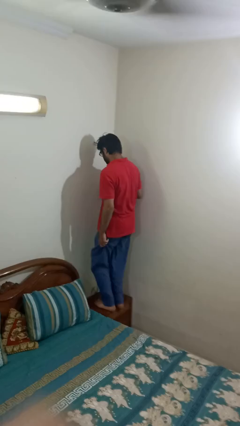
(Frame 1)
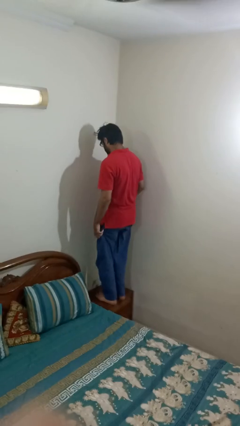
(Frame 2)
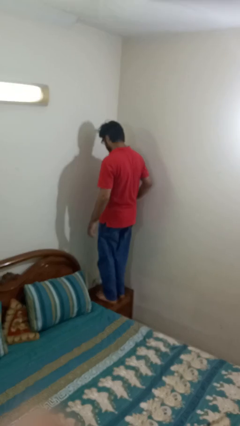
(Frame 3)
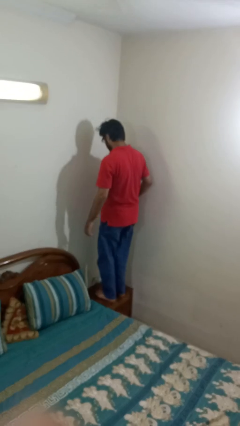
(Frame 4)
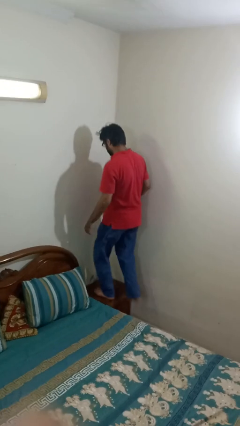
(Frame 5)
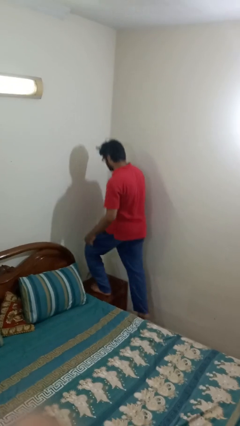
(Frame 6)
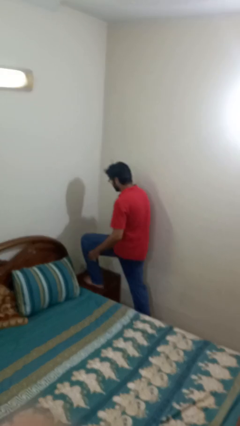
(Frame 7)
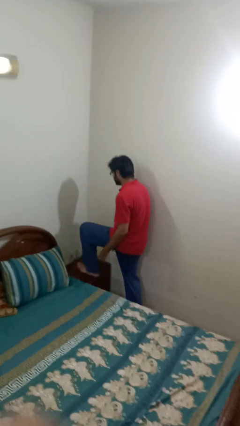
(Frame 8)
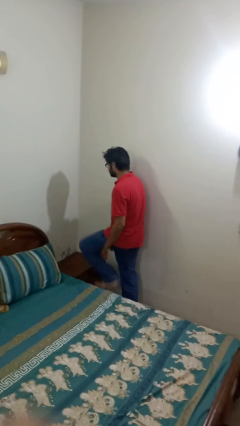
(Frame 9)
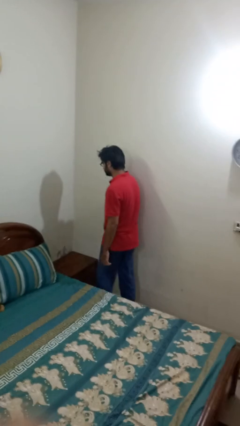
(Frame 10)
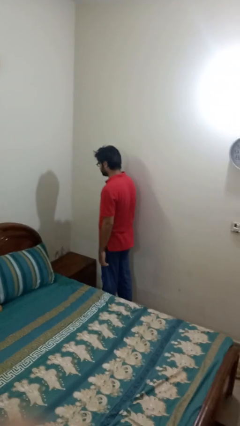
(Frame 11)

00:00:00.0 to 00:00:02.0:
person climbs off table

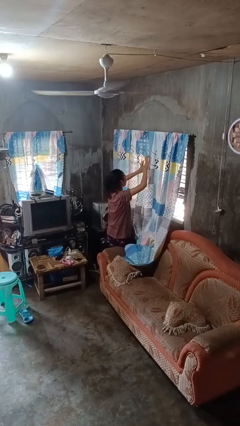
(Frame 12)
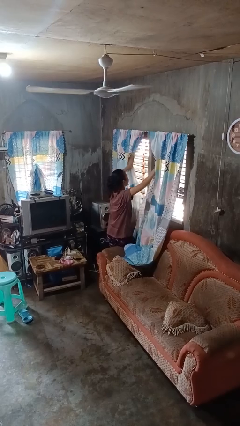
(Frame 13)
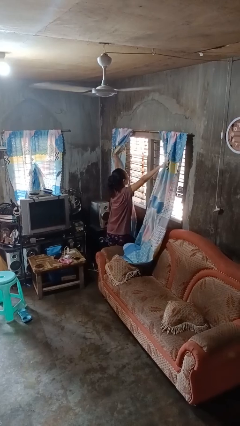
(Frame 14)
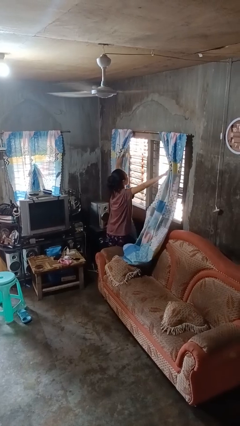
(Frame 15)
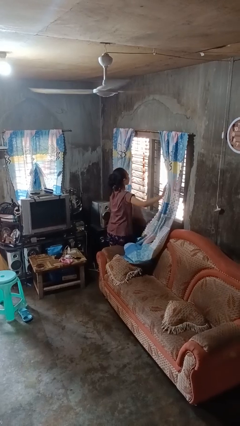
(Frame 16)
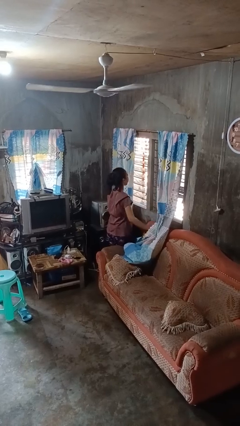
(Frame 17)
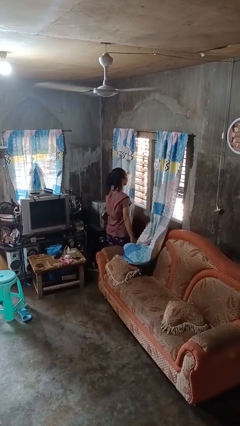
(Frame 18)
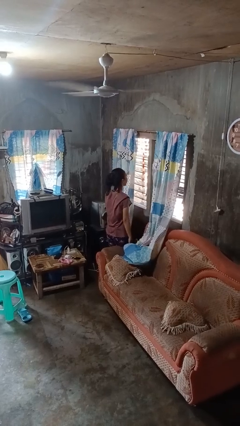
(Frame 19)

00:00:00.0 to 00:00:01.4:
person opens curtains

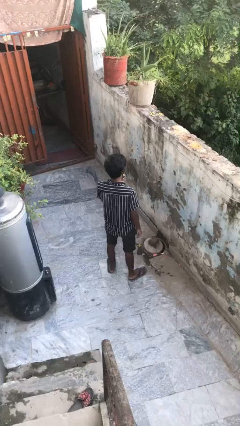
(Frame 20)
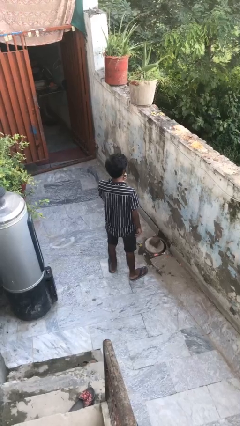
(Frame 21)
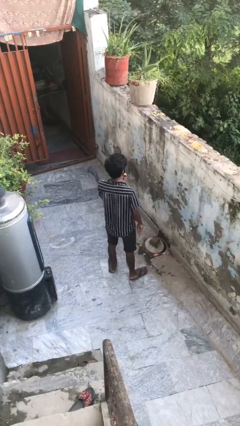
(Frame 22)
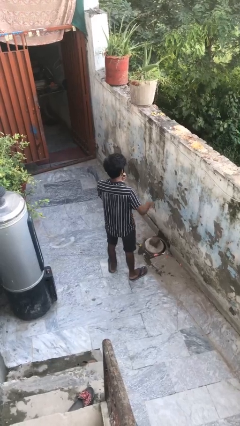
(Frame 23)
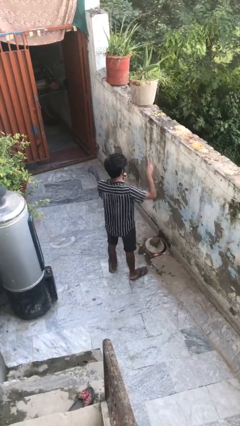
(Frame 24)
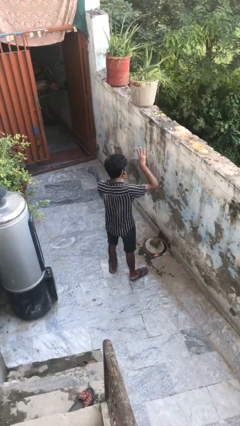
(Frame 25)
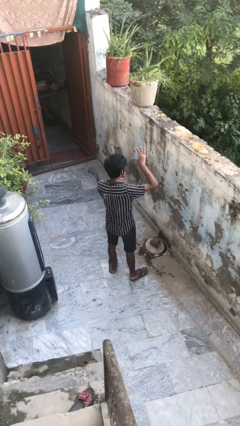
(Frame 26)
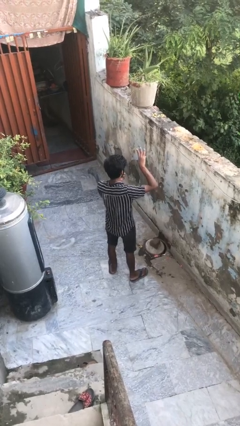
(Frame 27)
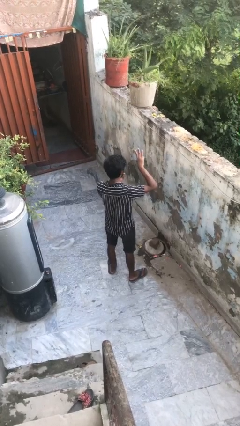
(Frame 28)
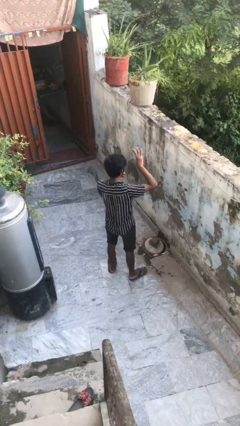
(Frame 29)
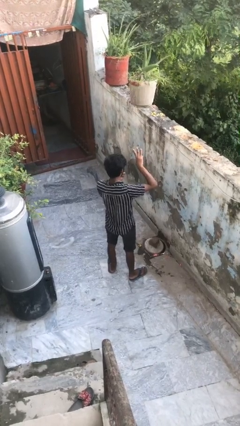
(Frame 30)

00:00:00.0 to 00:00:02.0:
person gestures number three

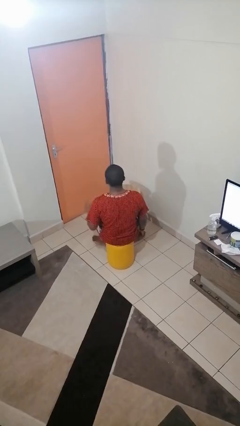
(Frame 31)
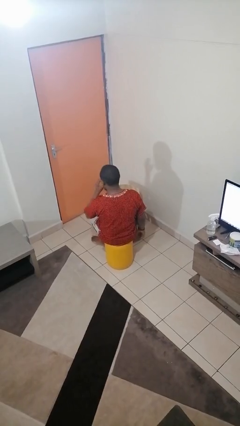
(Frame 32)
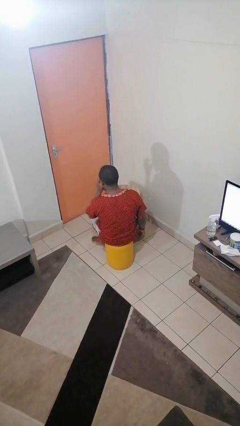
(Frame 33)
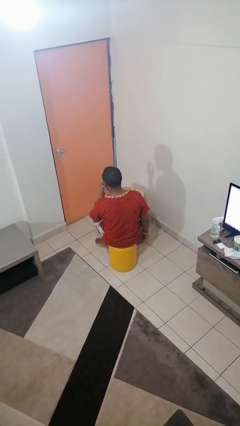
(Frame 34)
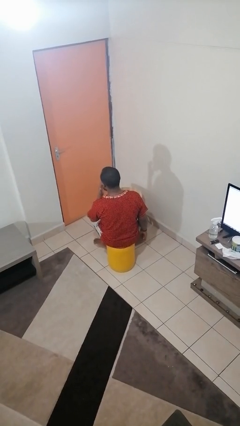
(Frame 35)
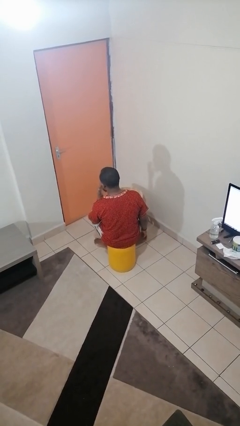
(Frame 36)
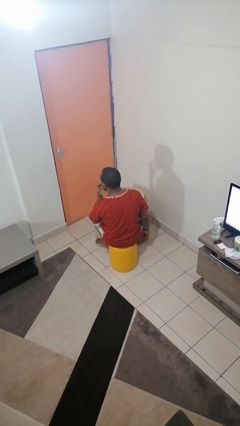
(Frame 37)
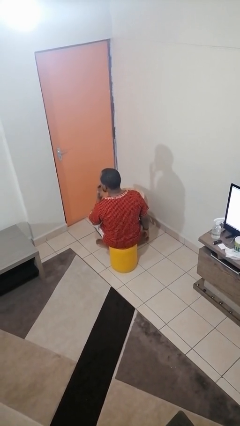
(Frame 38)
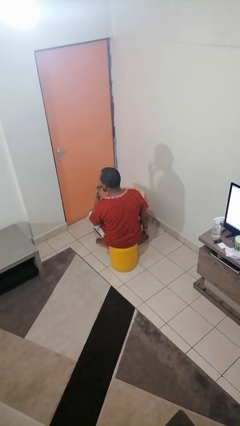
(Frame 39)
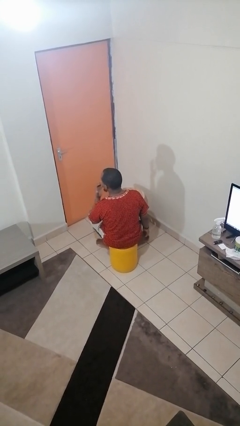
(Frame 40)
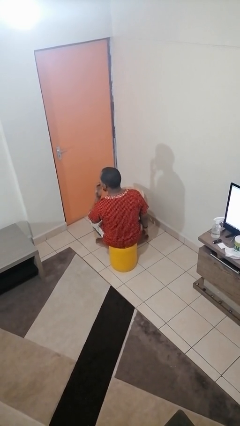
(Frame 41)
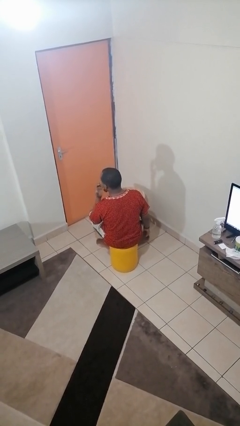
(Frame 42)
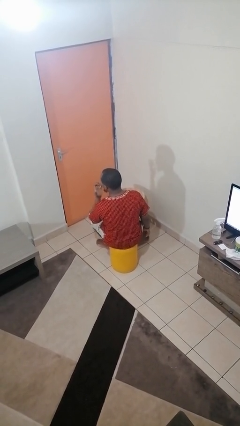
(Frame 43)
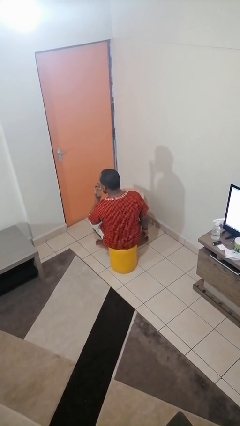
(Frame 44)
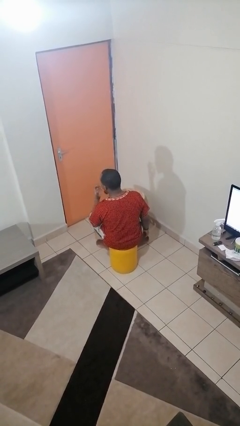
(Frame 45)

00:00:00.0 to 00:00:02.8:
person licks fingers

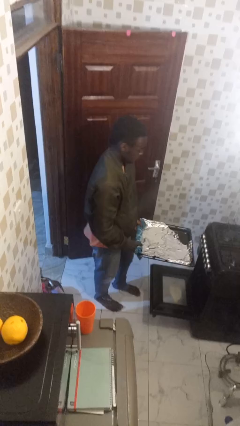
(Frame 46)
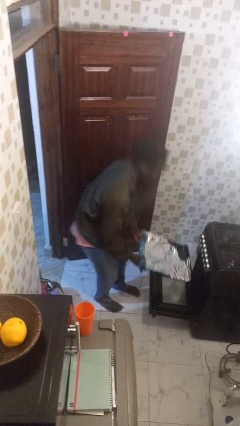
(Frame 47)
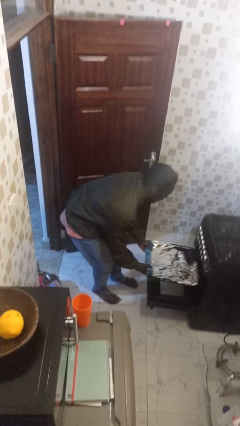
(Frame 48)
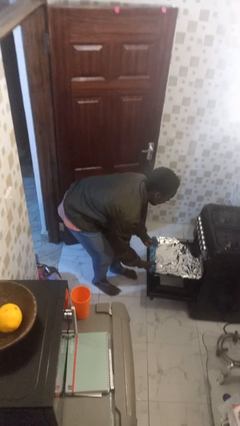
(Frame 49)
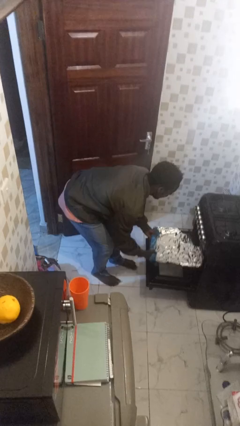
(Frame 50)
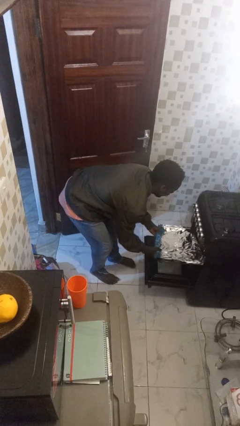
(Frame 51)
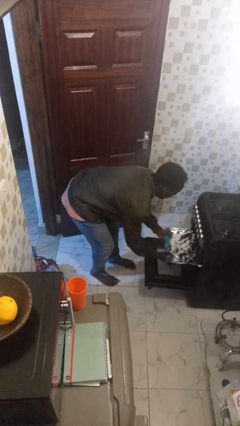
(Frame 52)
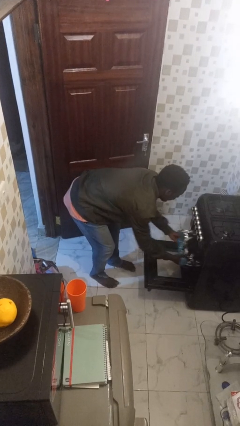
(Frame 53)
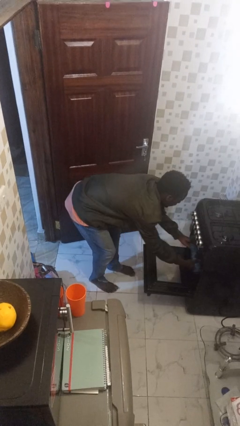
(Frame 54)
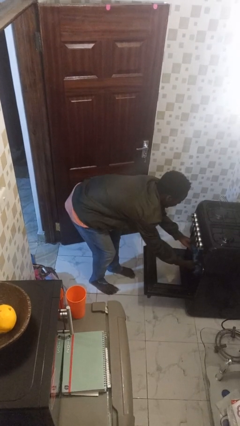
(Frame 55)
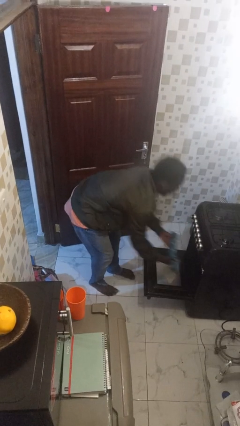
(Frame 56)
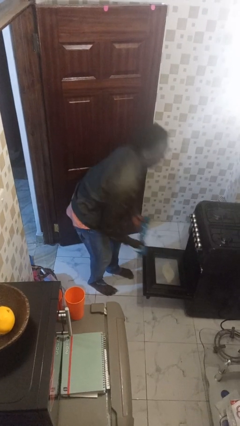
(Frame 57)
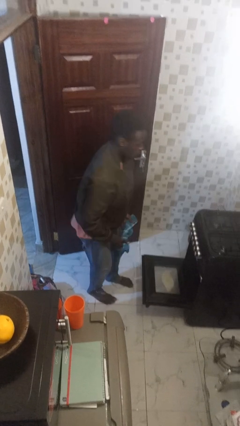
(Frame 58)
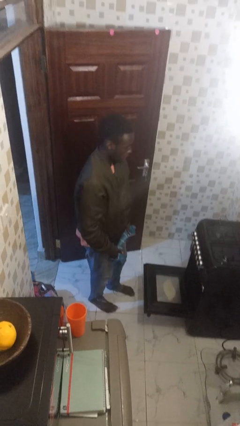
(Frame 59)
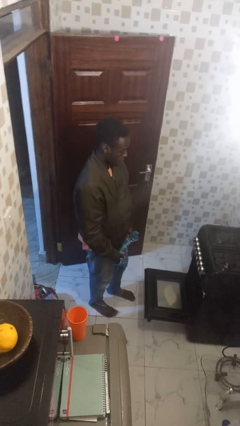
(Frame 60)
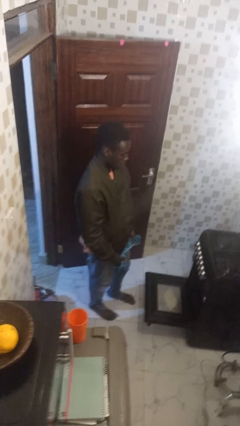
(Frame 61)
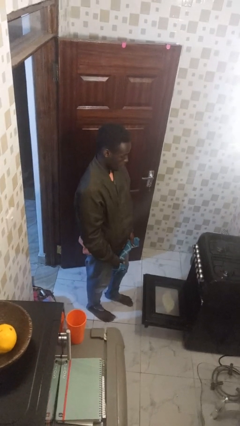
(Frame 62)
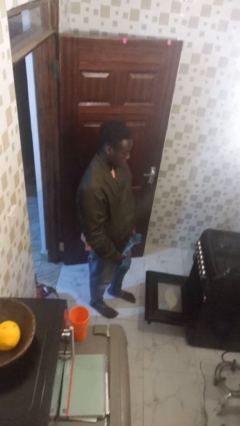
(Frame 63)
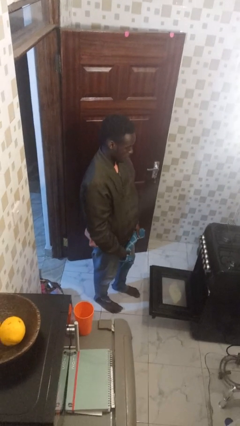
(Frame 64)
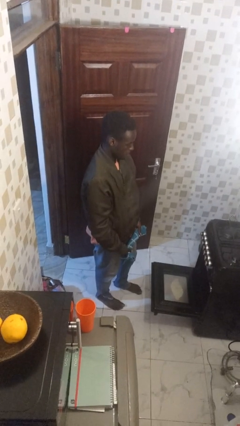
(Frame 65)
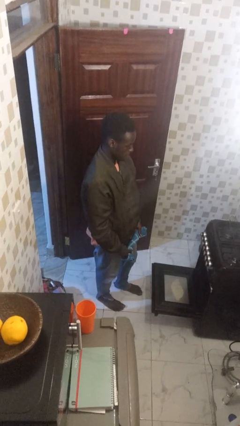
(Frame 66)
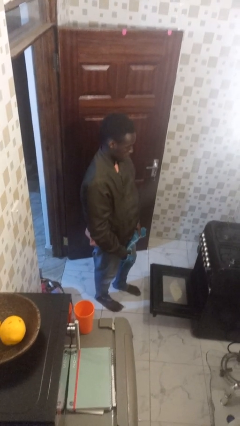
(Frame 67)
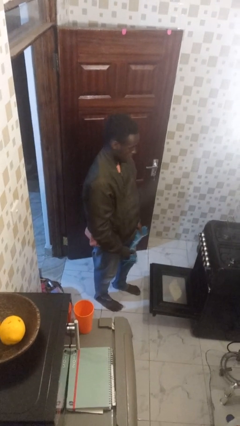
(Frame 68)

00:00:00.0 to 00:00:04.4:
person puts object into oven

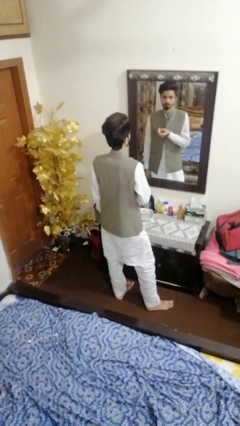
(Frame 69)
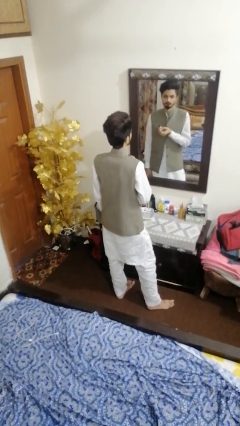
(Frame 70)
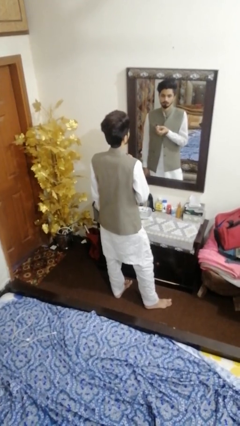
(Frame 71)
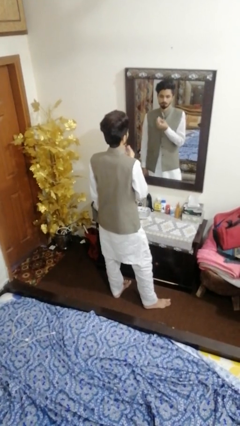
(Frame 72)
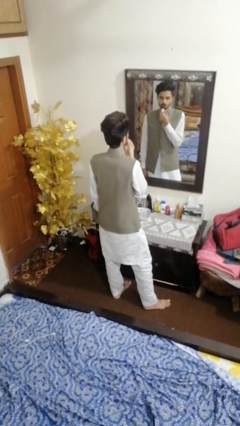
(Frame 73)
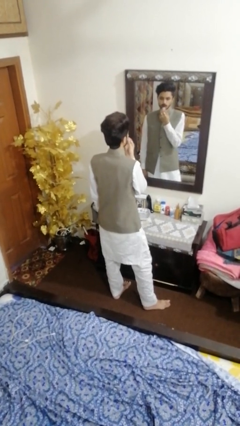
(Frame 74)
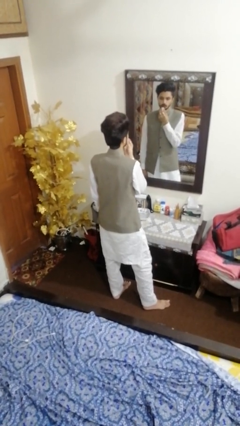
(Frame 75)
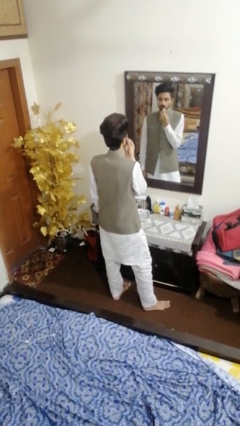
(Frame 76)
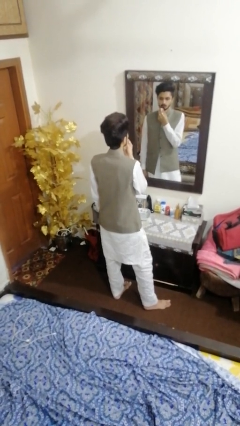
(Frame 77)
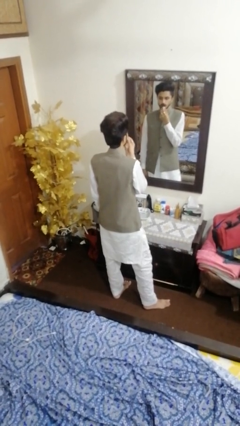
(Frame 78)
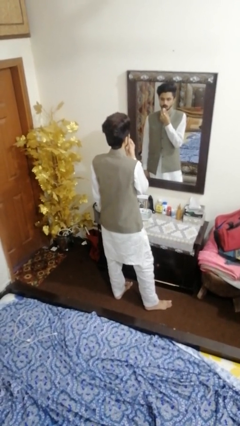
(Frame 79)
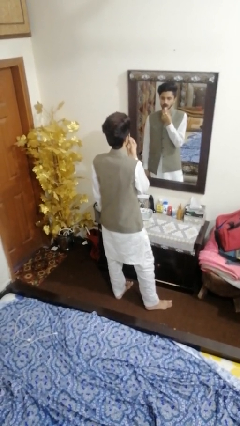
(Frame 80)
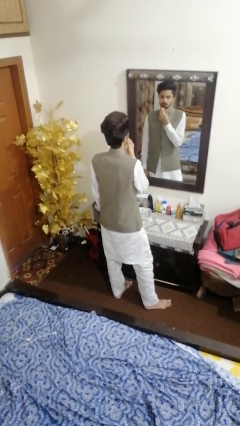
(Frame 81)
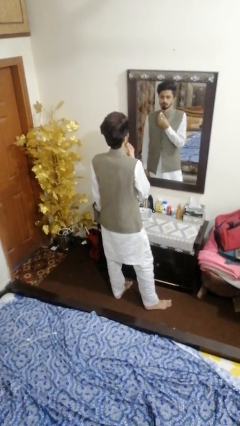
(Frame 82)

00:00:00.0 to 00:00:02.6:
person applies lip makeup

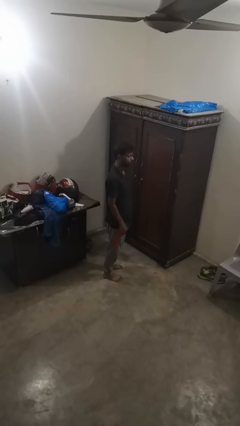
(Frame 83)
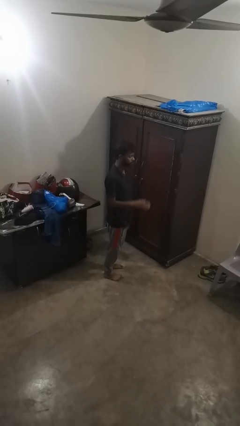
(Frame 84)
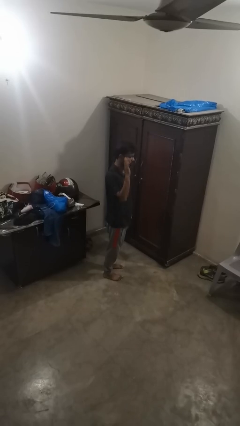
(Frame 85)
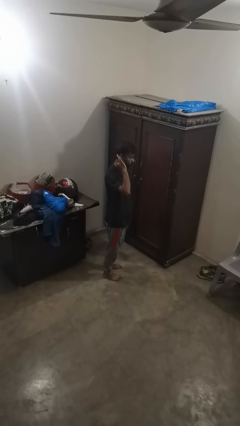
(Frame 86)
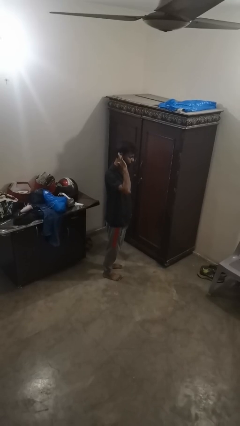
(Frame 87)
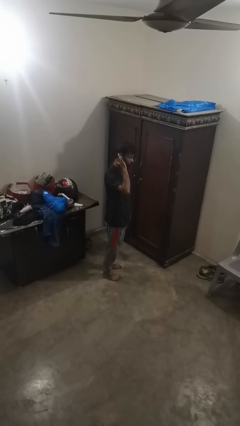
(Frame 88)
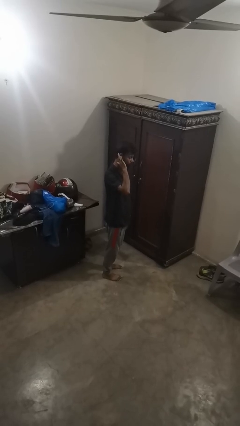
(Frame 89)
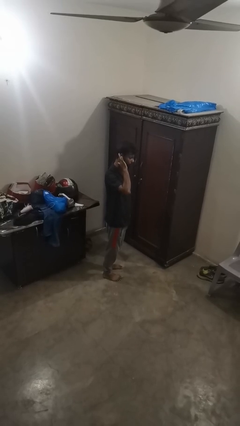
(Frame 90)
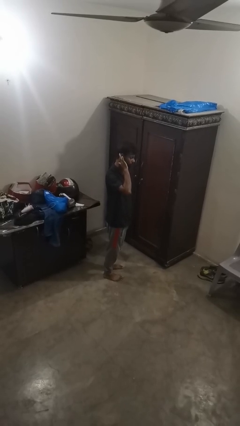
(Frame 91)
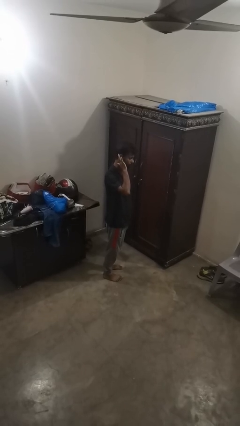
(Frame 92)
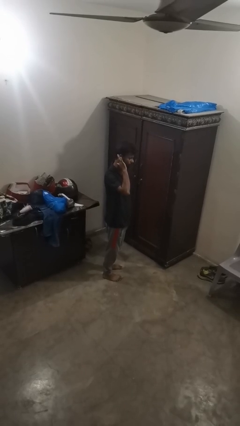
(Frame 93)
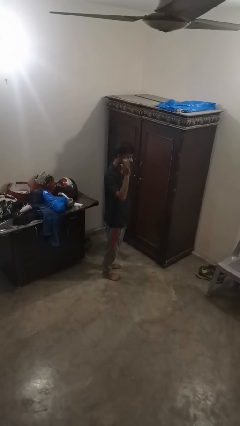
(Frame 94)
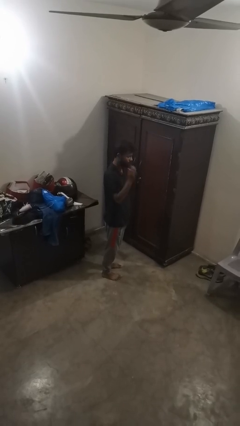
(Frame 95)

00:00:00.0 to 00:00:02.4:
person gestures listen closely
